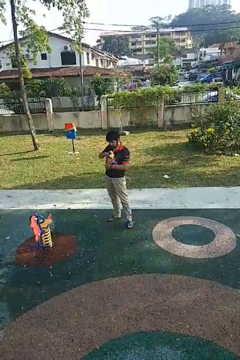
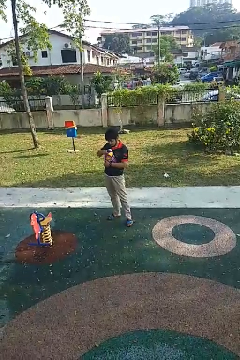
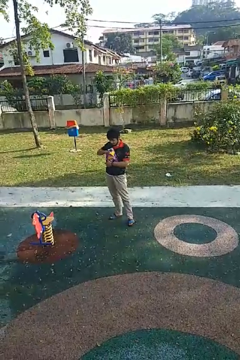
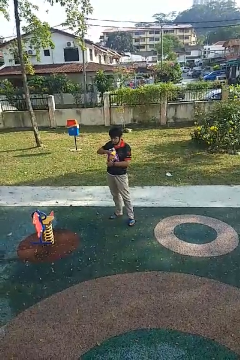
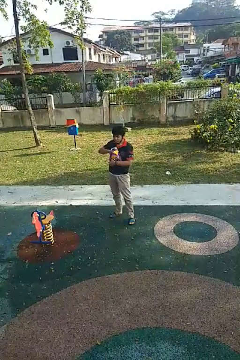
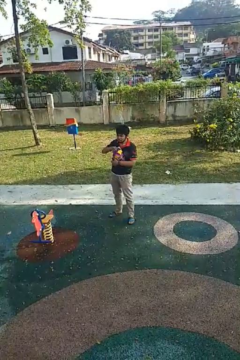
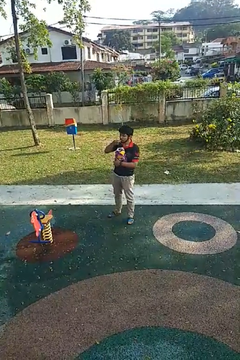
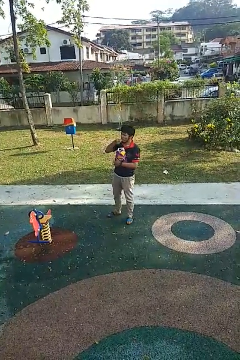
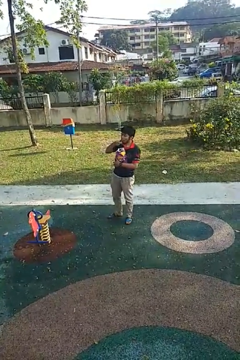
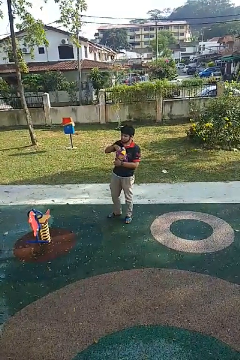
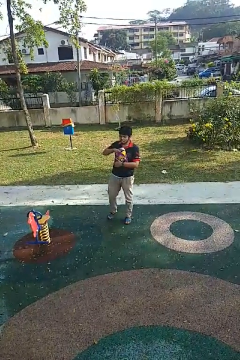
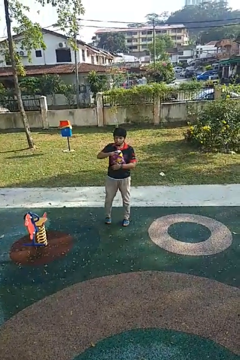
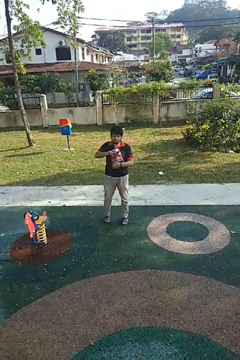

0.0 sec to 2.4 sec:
person eats snack from bag

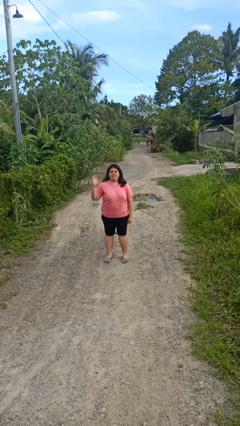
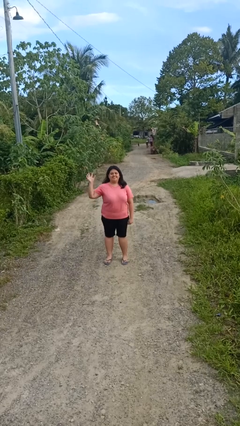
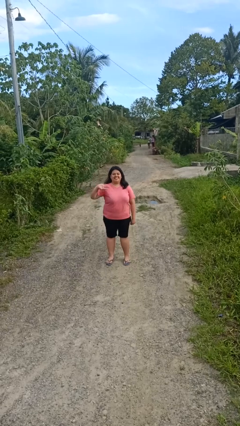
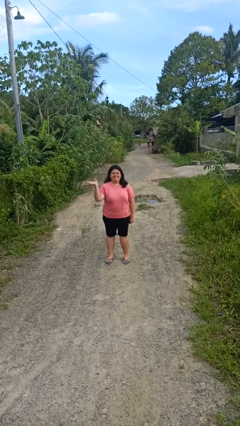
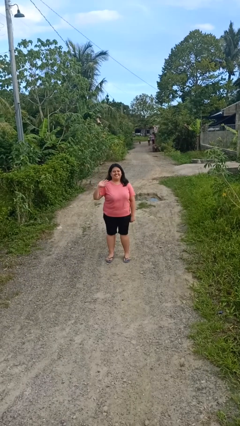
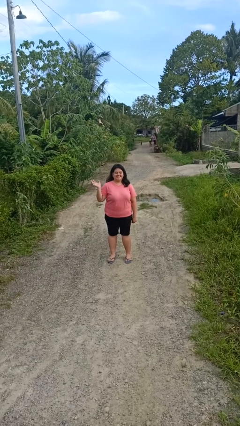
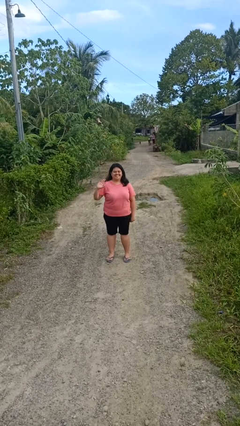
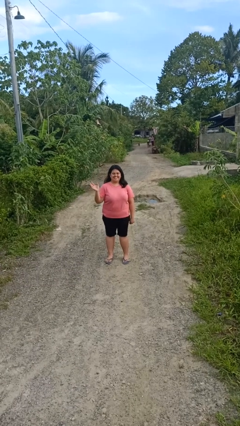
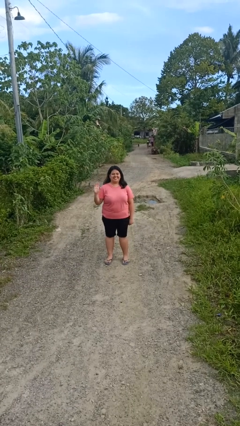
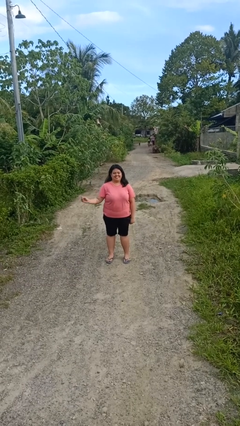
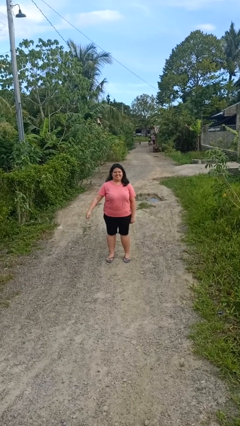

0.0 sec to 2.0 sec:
person waves at person

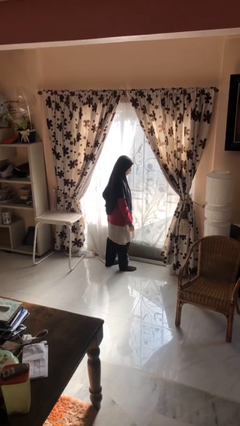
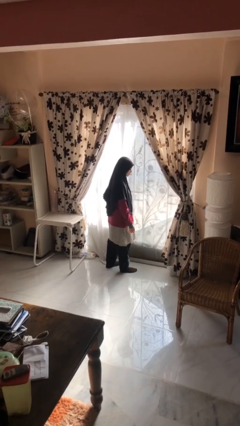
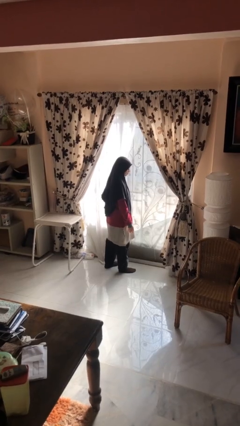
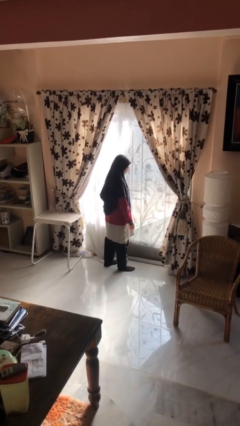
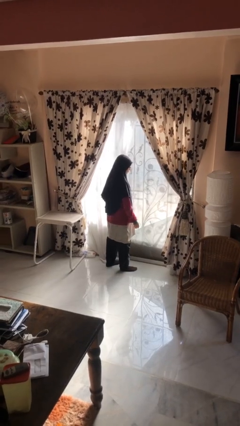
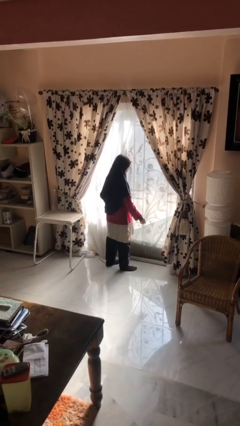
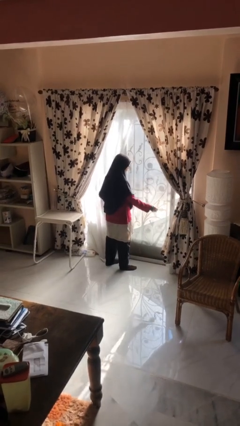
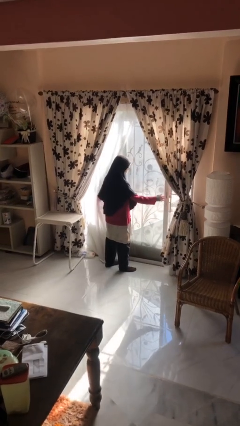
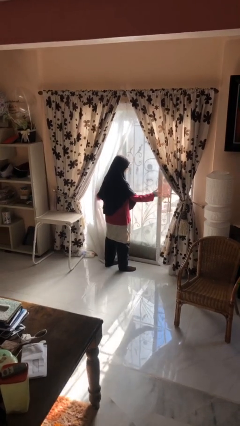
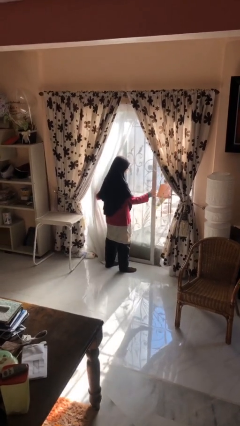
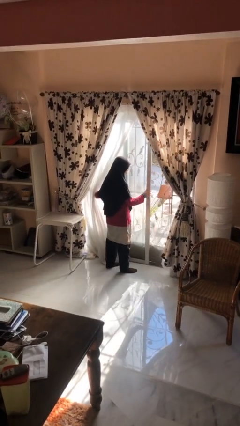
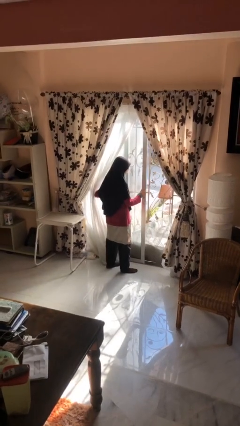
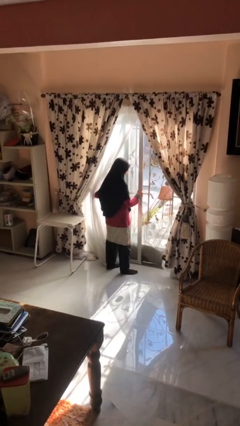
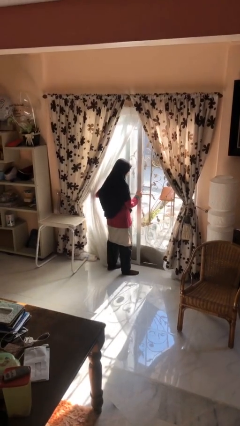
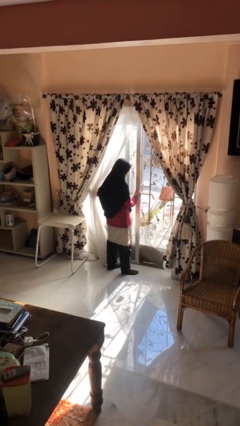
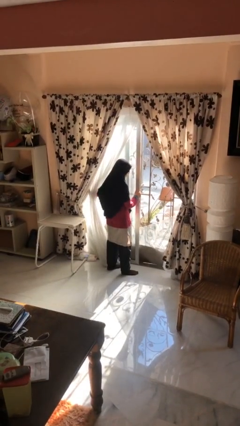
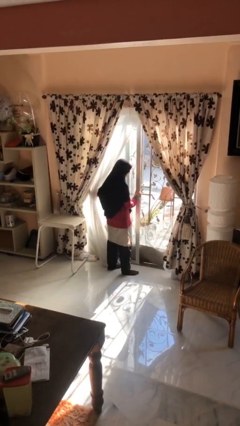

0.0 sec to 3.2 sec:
person opens sliding door

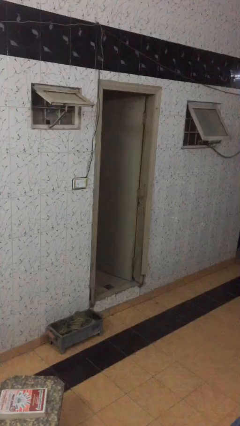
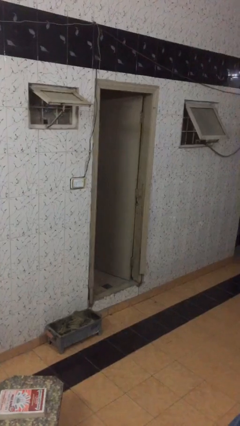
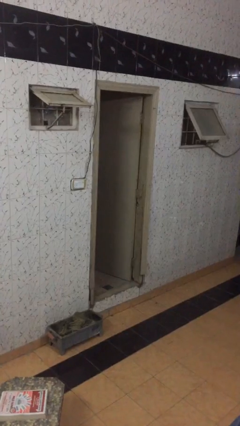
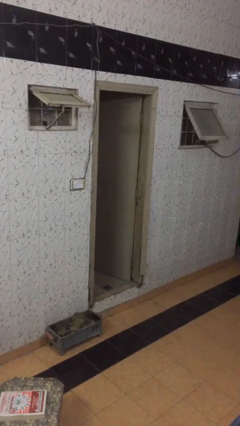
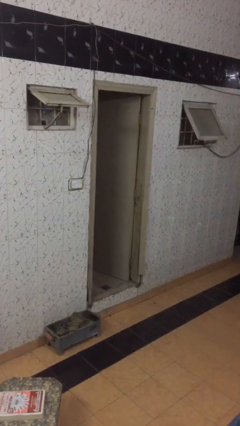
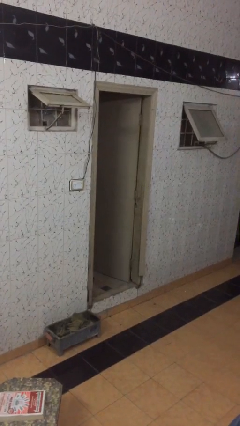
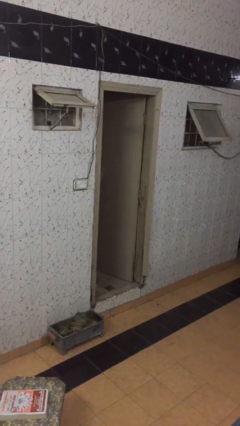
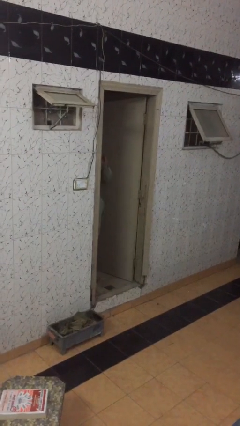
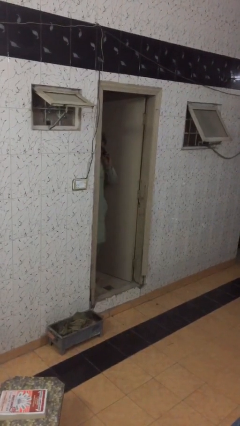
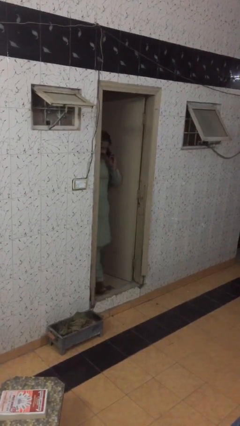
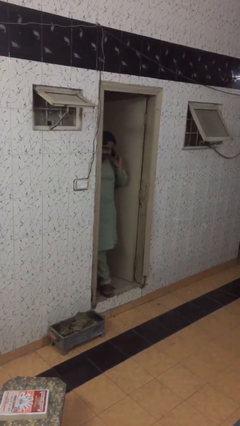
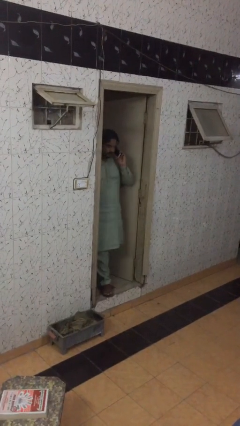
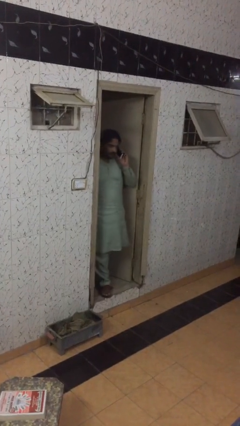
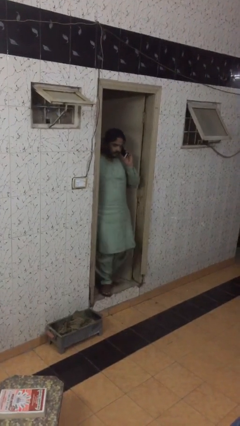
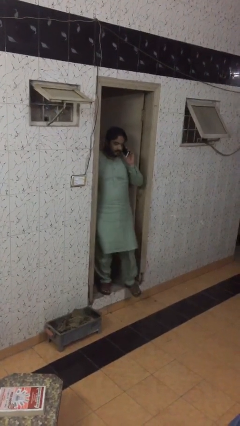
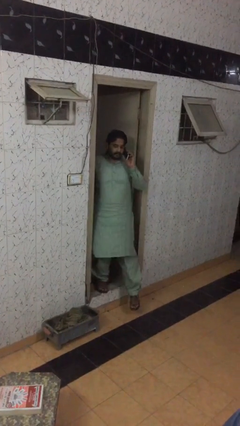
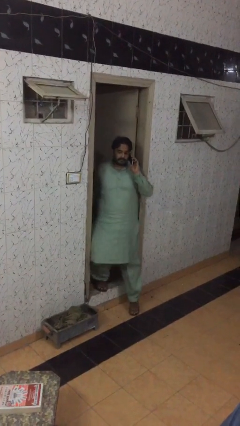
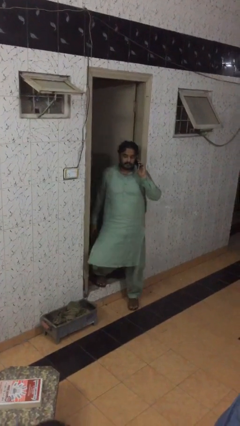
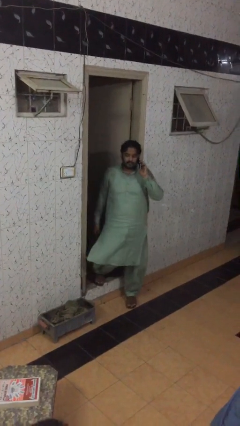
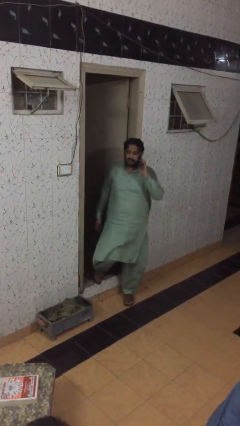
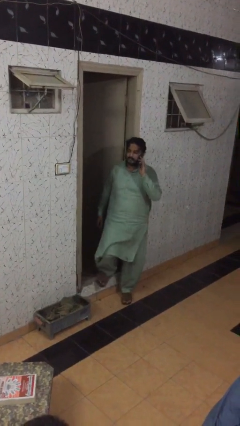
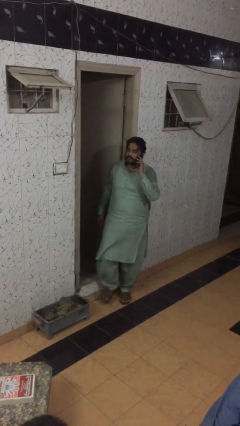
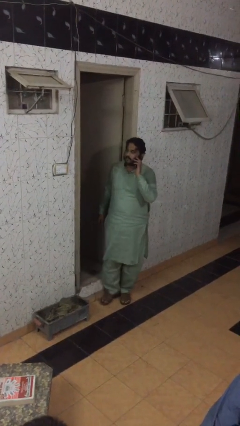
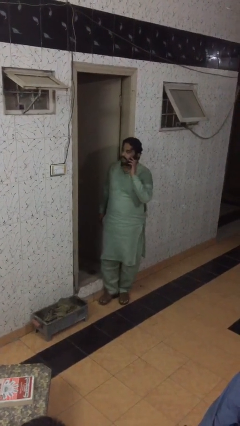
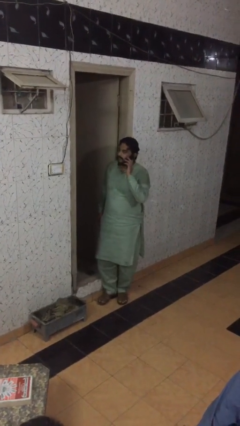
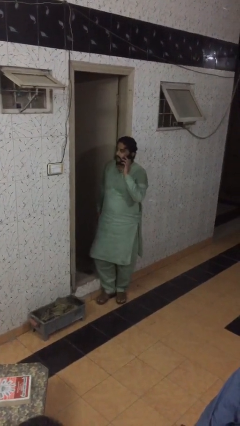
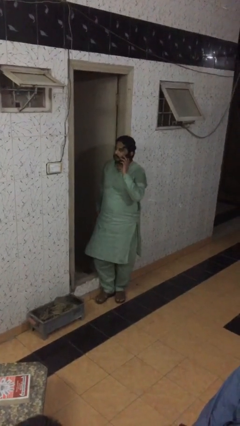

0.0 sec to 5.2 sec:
person enters scene through structure

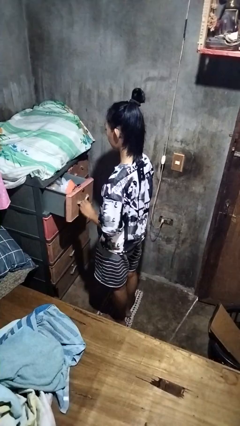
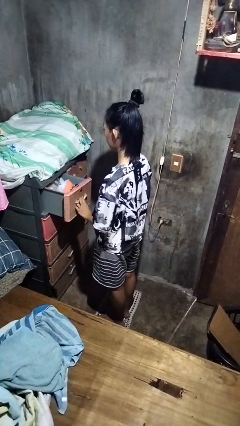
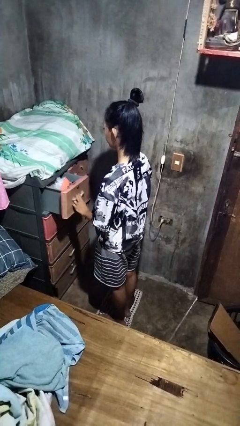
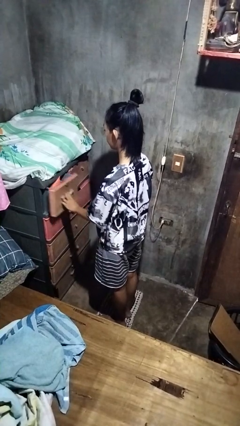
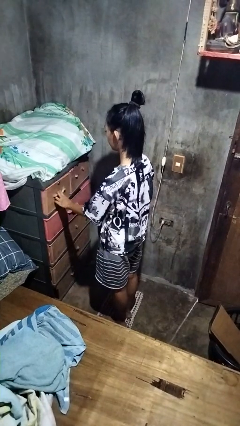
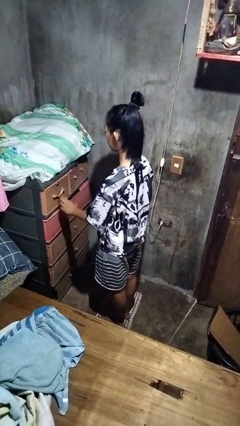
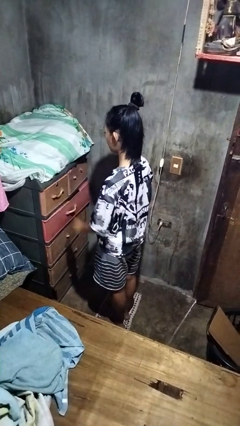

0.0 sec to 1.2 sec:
person closes dresser drawer

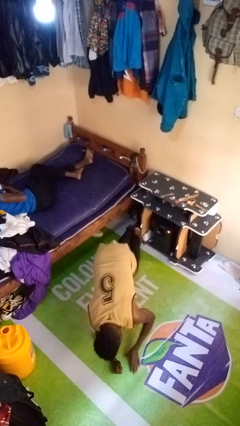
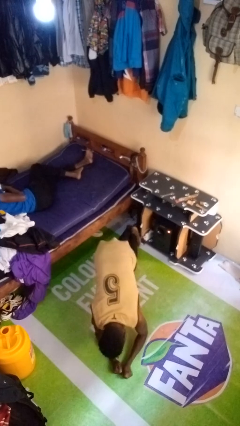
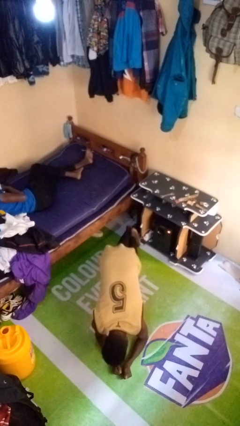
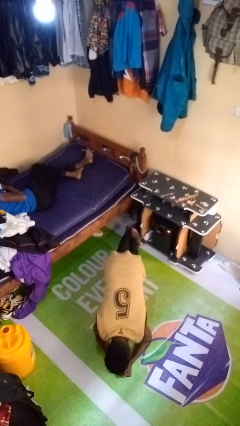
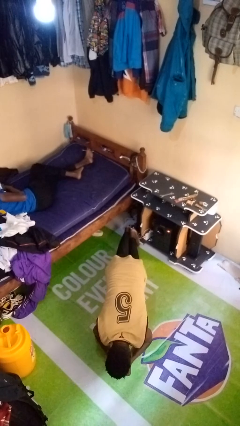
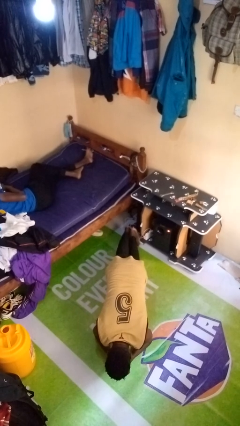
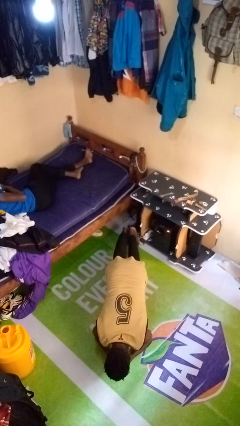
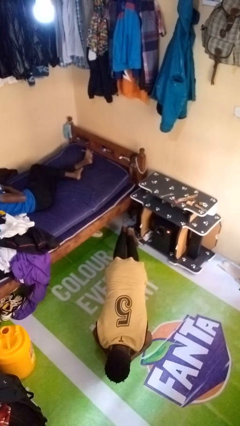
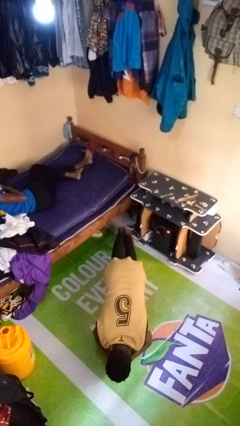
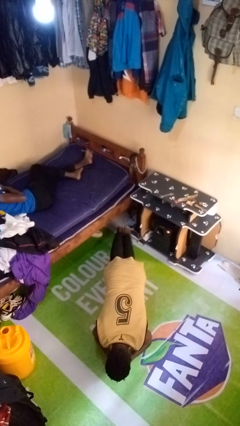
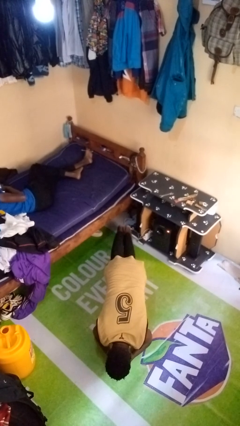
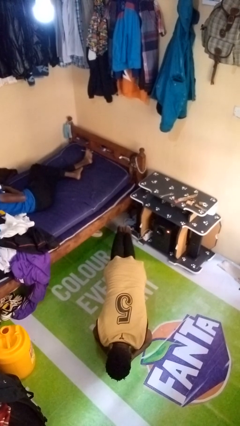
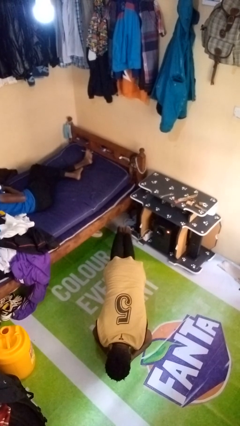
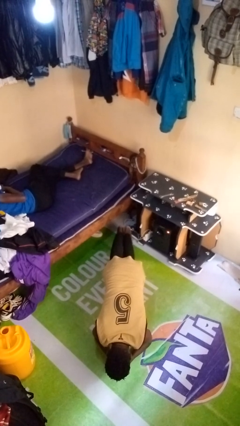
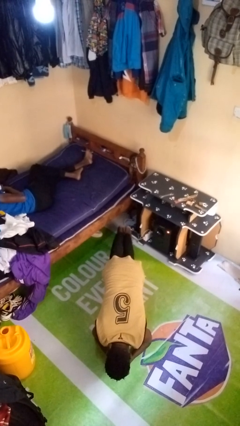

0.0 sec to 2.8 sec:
person exercises with plank

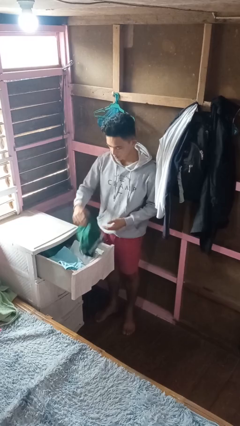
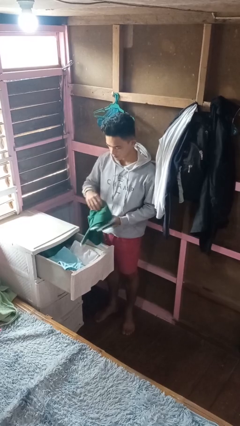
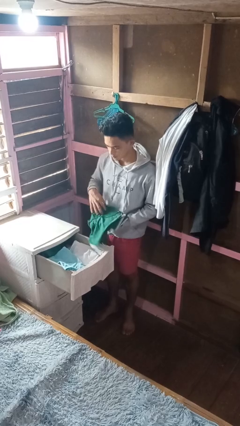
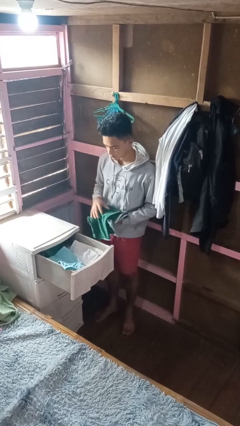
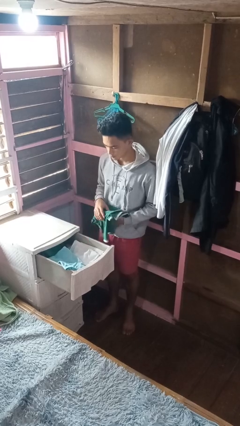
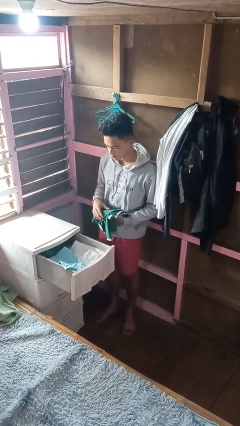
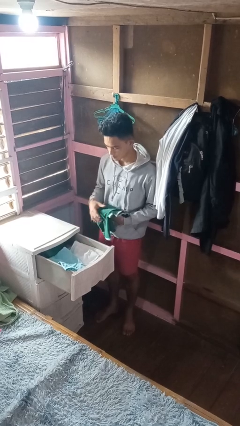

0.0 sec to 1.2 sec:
person takes clothes from dresser
